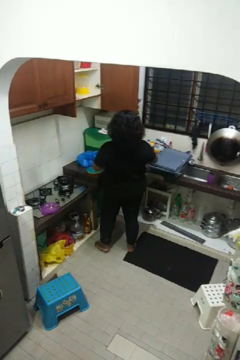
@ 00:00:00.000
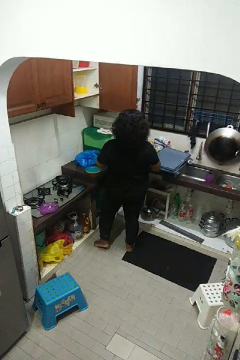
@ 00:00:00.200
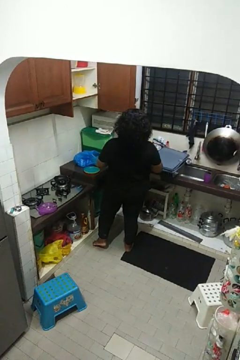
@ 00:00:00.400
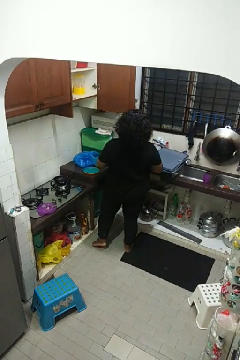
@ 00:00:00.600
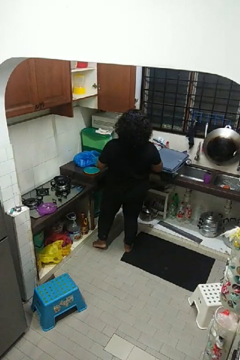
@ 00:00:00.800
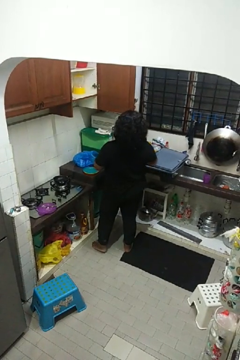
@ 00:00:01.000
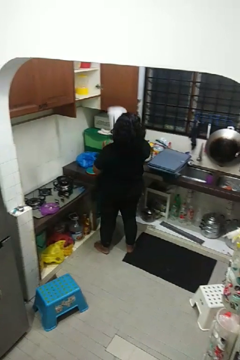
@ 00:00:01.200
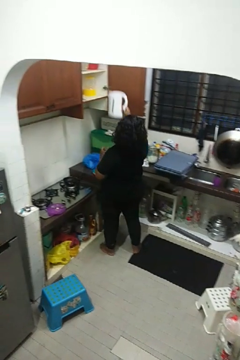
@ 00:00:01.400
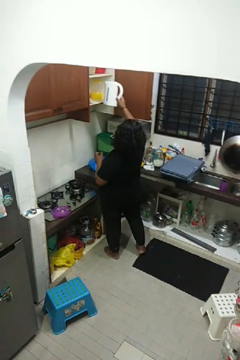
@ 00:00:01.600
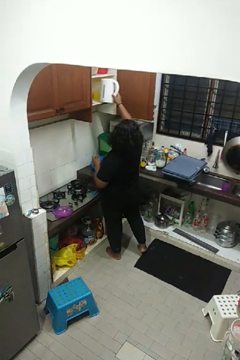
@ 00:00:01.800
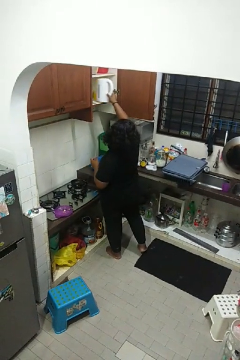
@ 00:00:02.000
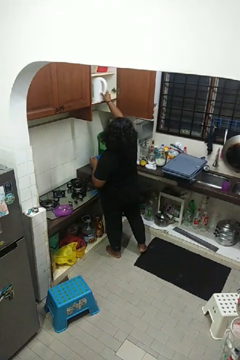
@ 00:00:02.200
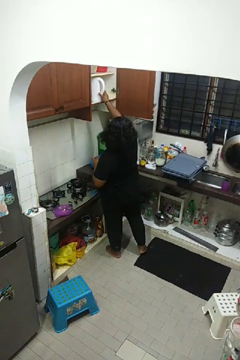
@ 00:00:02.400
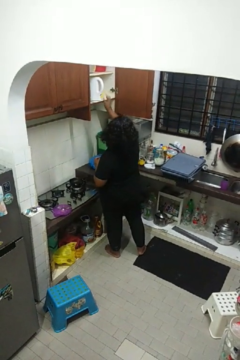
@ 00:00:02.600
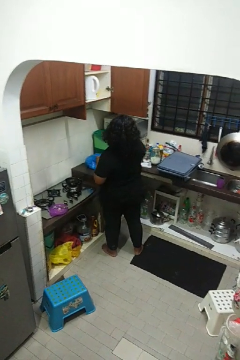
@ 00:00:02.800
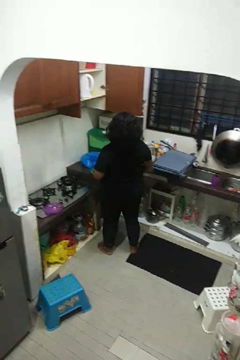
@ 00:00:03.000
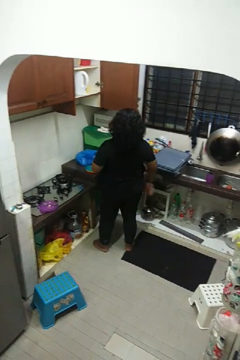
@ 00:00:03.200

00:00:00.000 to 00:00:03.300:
person puts object in cabinet

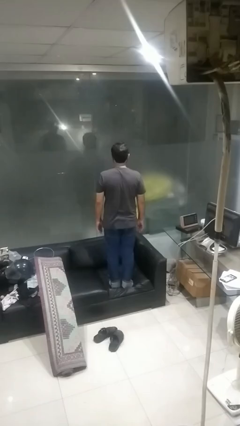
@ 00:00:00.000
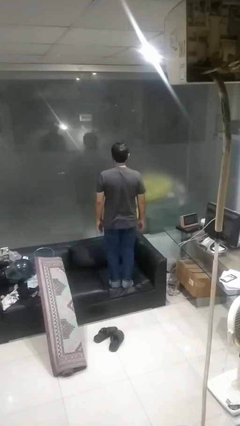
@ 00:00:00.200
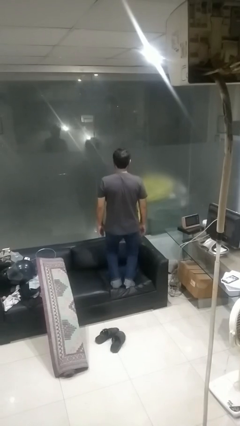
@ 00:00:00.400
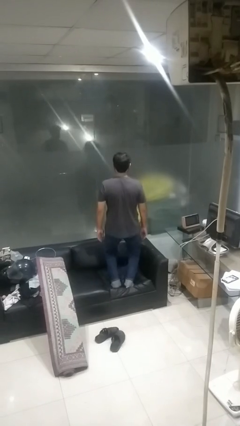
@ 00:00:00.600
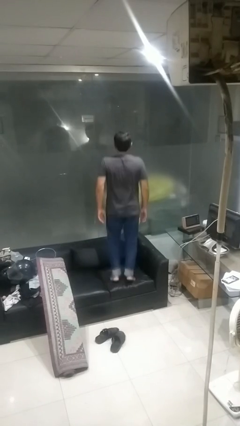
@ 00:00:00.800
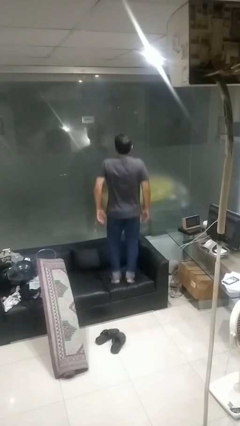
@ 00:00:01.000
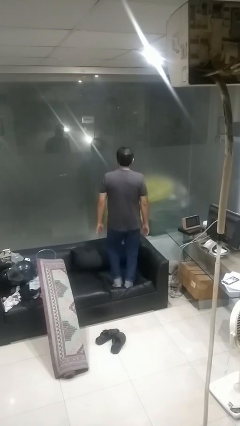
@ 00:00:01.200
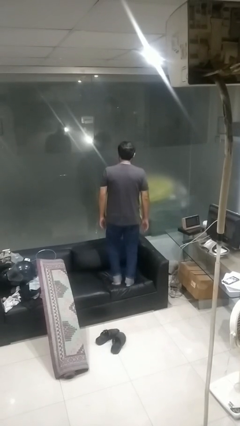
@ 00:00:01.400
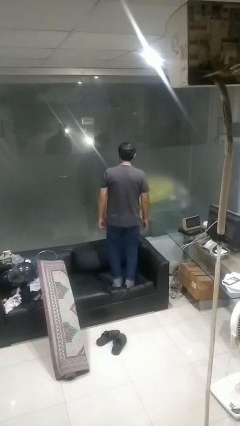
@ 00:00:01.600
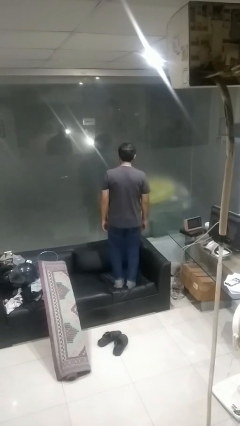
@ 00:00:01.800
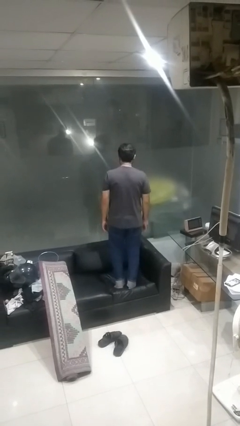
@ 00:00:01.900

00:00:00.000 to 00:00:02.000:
person jumps on couch

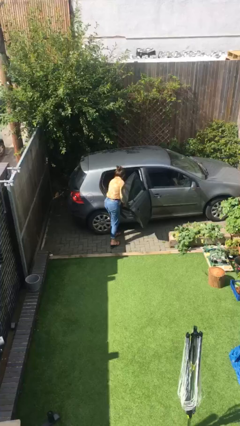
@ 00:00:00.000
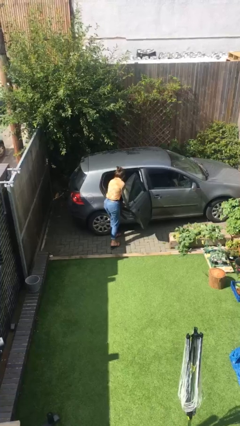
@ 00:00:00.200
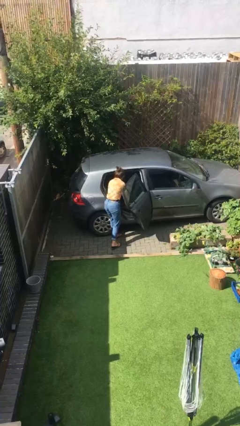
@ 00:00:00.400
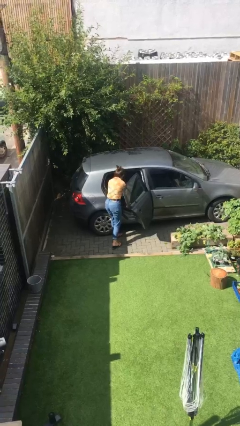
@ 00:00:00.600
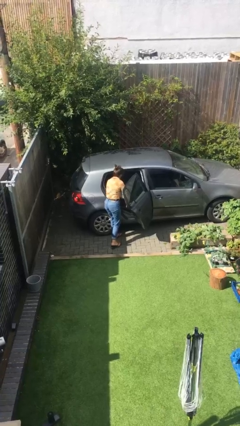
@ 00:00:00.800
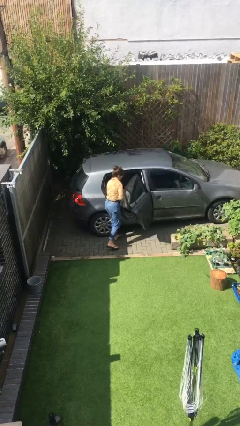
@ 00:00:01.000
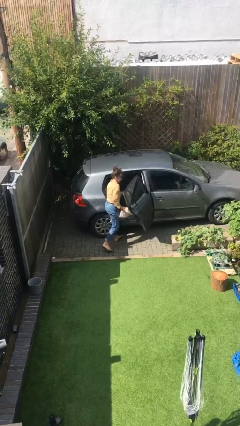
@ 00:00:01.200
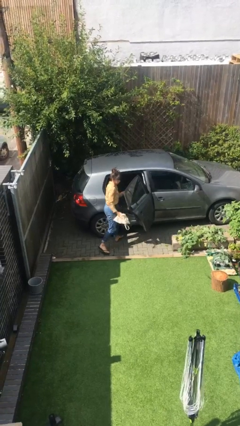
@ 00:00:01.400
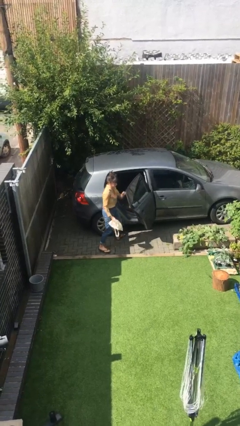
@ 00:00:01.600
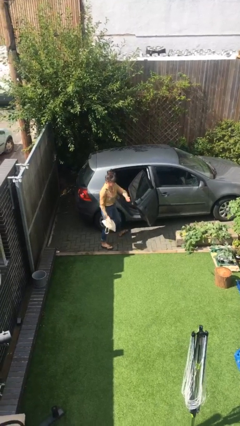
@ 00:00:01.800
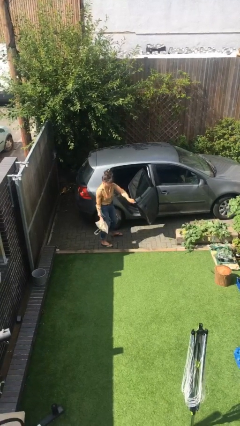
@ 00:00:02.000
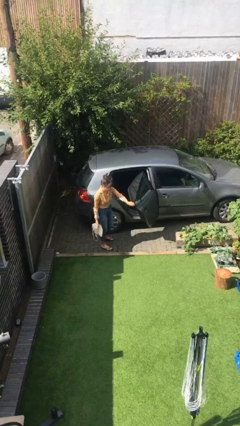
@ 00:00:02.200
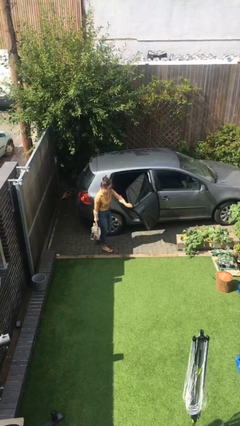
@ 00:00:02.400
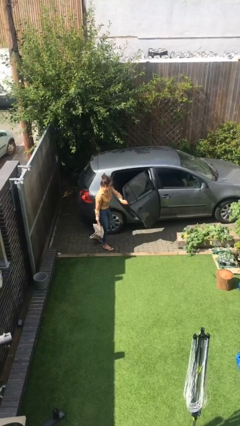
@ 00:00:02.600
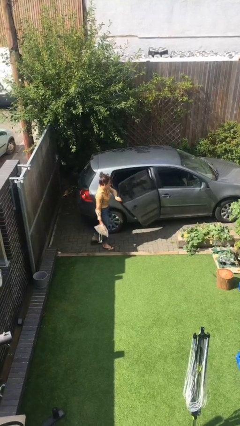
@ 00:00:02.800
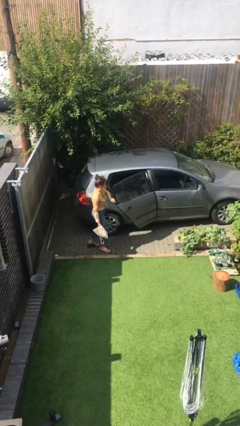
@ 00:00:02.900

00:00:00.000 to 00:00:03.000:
person unloads car

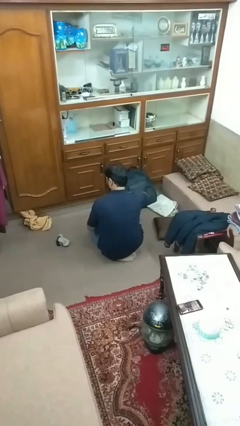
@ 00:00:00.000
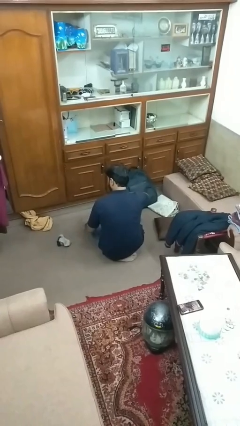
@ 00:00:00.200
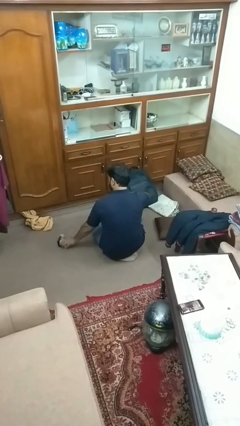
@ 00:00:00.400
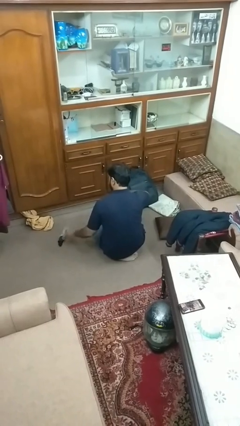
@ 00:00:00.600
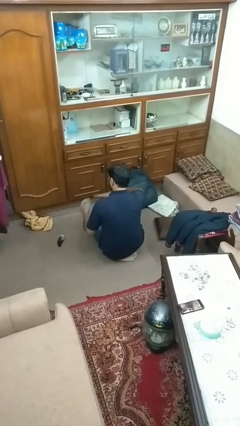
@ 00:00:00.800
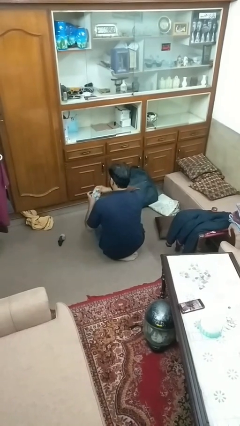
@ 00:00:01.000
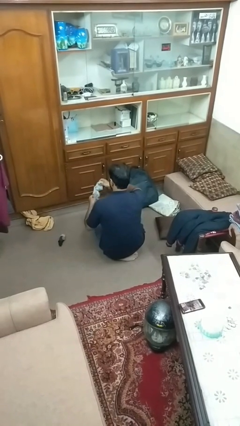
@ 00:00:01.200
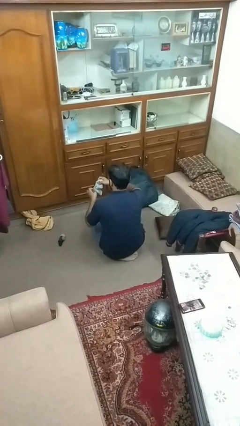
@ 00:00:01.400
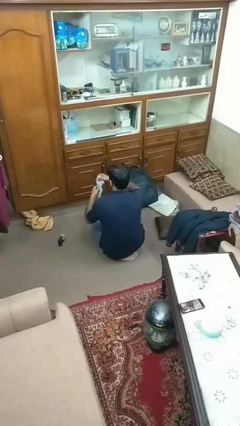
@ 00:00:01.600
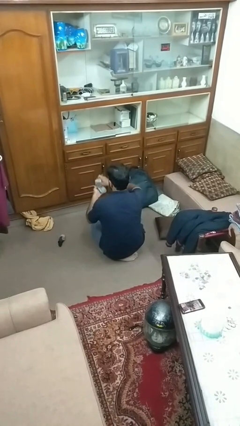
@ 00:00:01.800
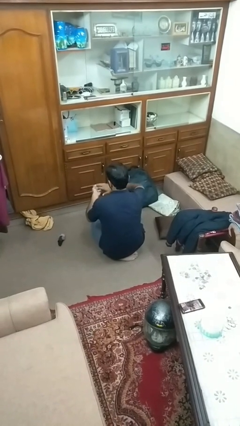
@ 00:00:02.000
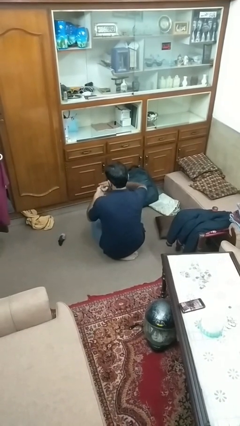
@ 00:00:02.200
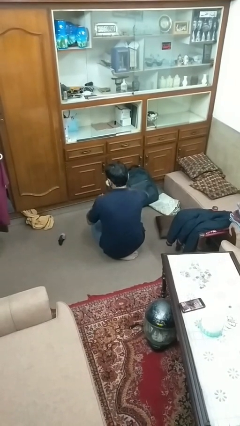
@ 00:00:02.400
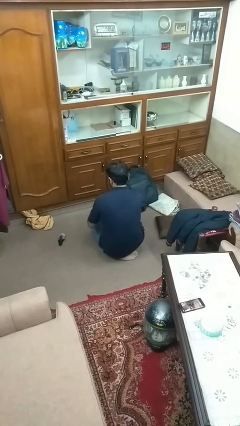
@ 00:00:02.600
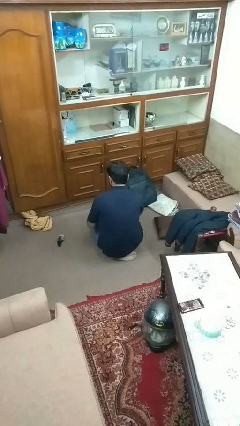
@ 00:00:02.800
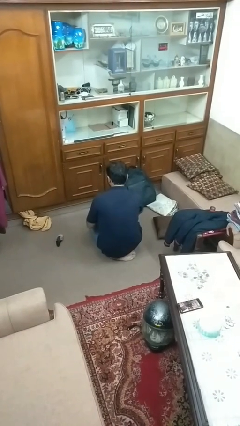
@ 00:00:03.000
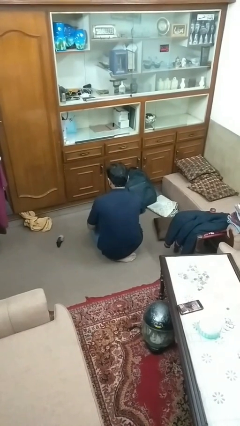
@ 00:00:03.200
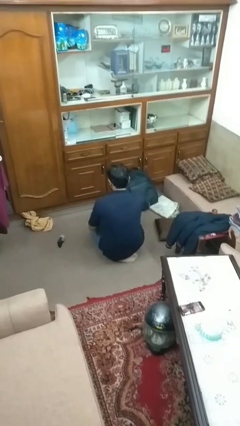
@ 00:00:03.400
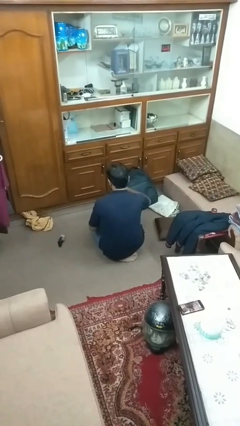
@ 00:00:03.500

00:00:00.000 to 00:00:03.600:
person folds socks

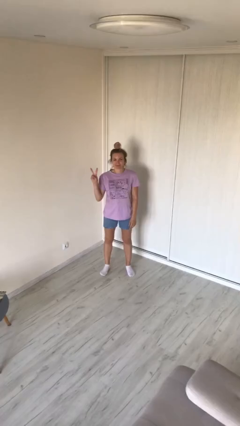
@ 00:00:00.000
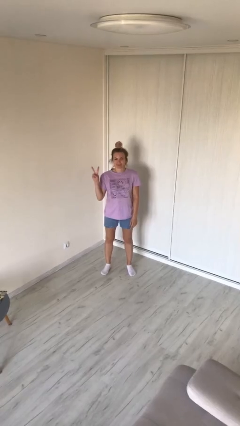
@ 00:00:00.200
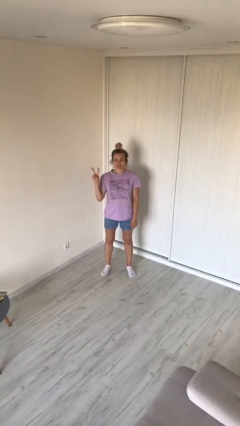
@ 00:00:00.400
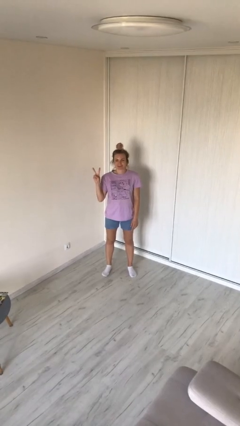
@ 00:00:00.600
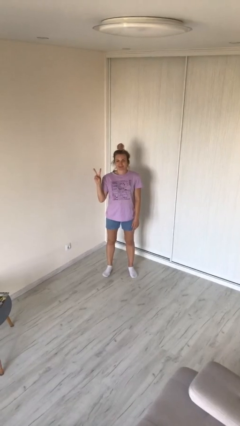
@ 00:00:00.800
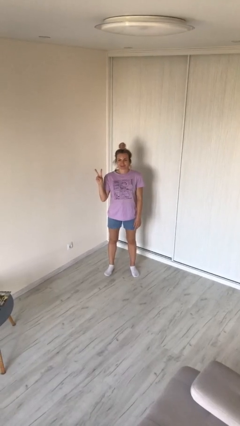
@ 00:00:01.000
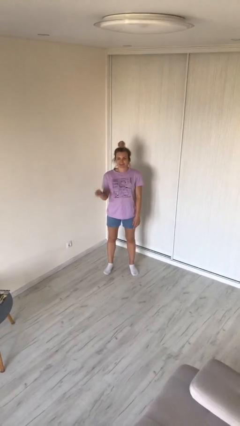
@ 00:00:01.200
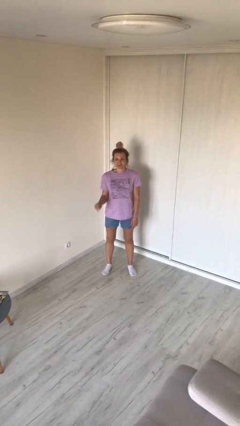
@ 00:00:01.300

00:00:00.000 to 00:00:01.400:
person gestures peace

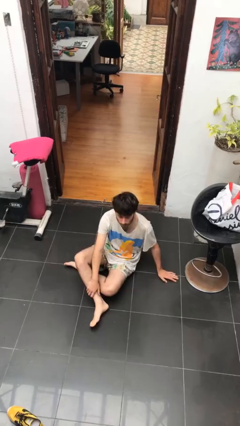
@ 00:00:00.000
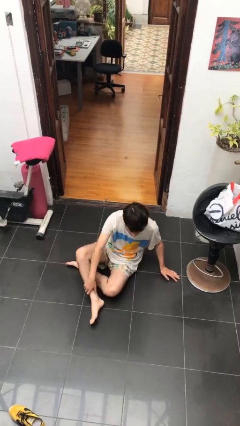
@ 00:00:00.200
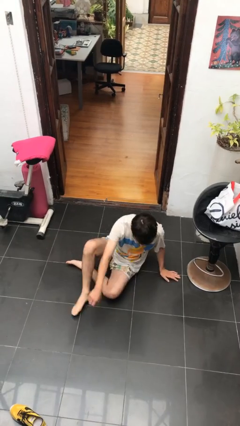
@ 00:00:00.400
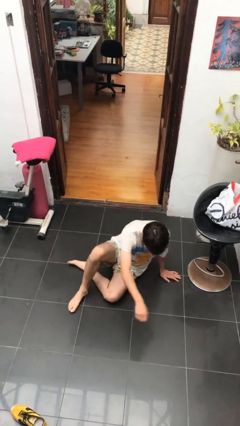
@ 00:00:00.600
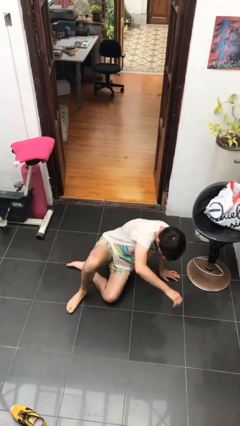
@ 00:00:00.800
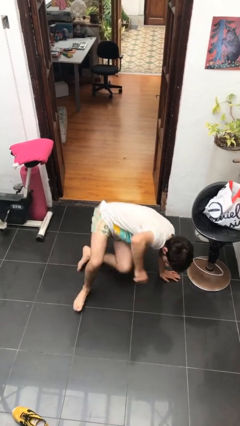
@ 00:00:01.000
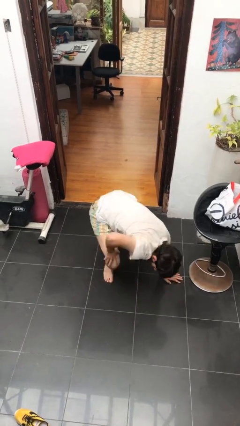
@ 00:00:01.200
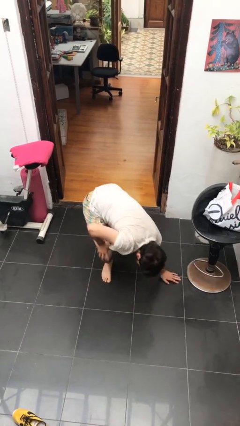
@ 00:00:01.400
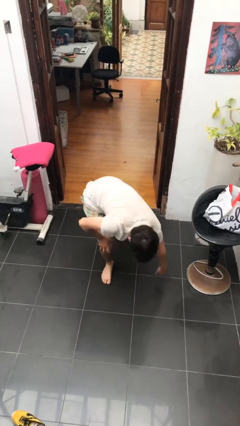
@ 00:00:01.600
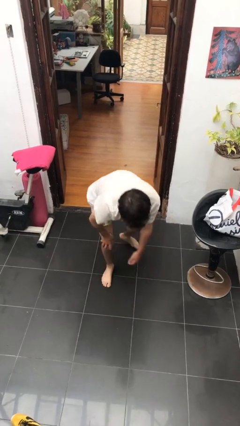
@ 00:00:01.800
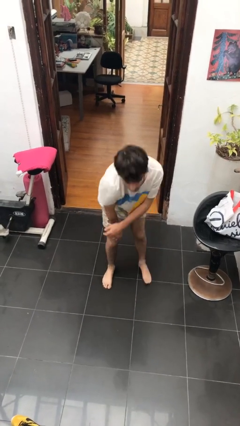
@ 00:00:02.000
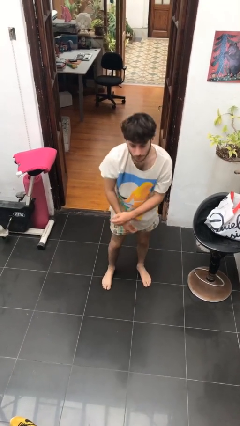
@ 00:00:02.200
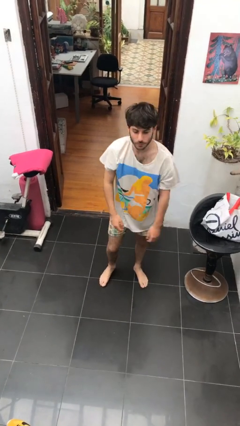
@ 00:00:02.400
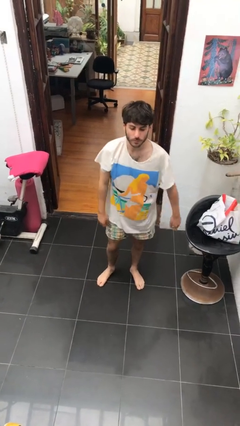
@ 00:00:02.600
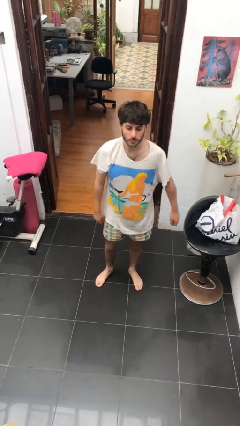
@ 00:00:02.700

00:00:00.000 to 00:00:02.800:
person stands up

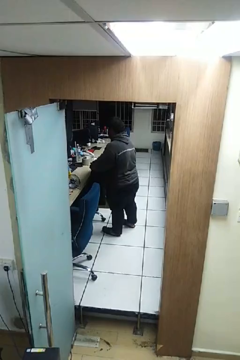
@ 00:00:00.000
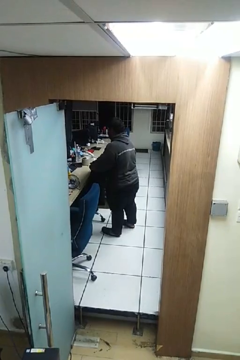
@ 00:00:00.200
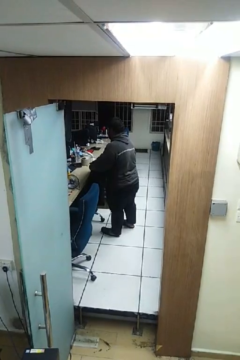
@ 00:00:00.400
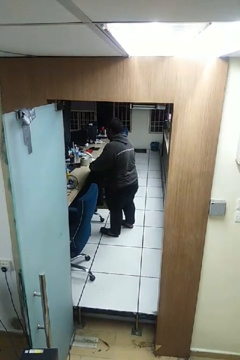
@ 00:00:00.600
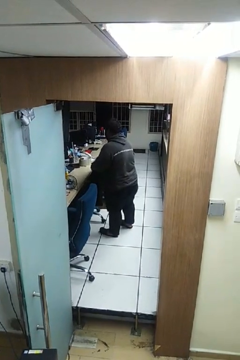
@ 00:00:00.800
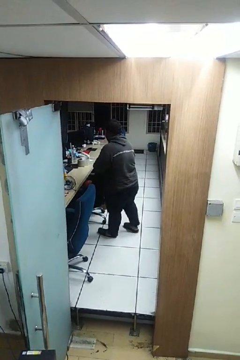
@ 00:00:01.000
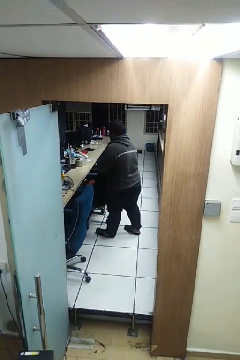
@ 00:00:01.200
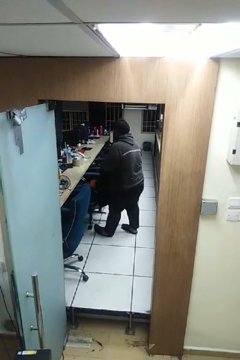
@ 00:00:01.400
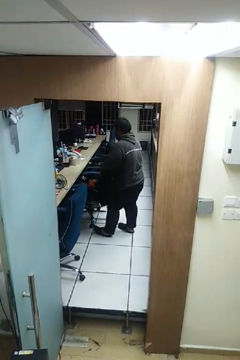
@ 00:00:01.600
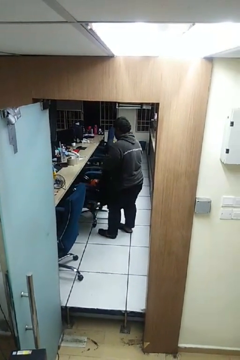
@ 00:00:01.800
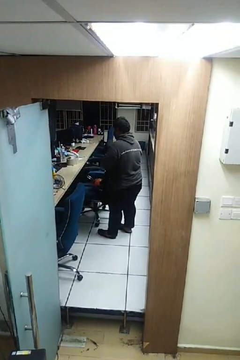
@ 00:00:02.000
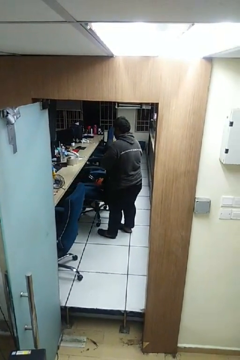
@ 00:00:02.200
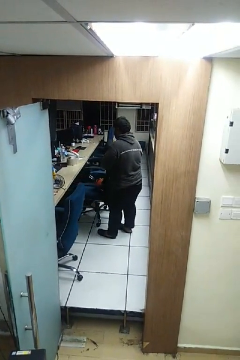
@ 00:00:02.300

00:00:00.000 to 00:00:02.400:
person pulls out chair
